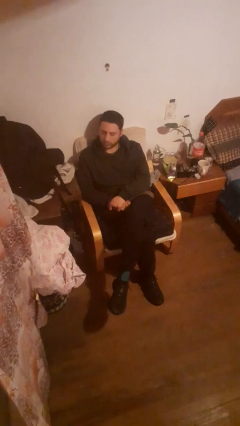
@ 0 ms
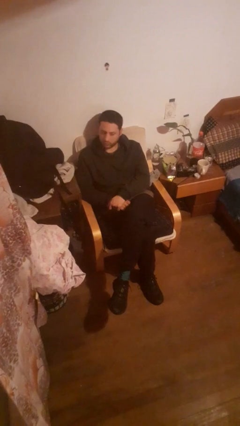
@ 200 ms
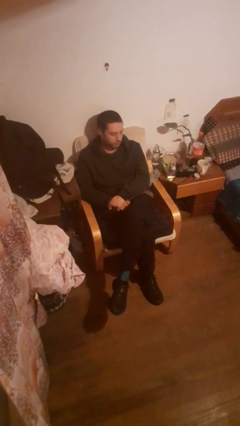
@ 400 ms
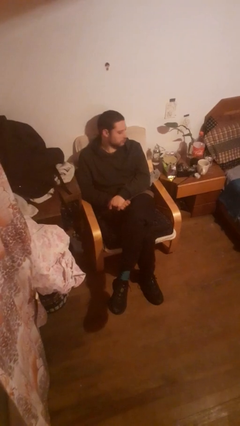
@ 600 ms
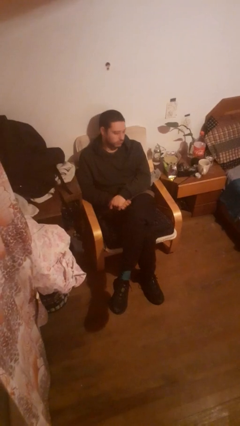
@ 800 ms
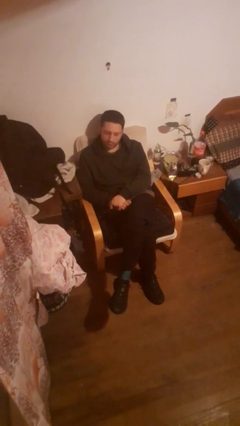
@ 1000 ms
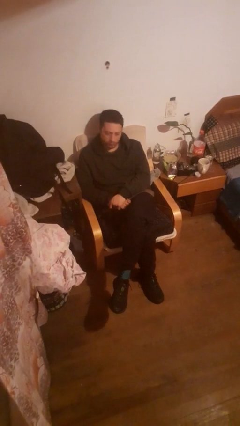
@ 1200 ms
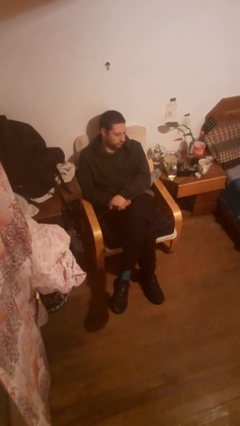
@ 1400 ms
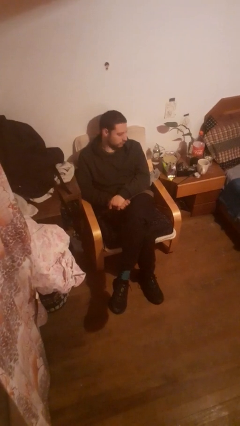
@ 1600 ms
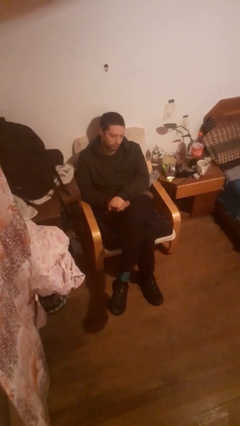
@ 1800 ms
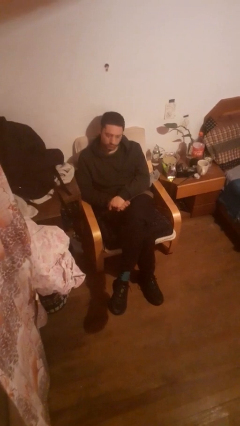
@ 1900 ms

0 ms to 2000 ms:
person shakes head

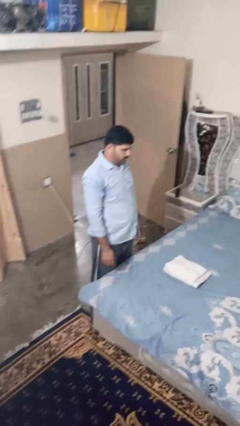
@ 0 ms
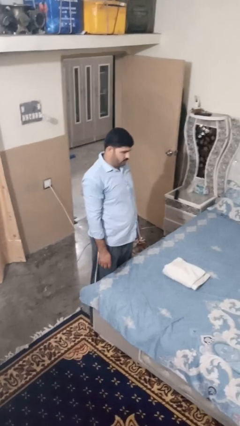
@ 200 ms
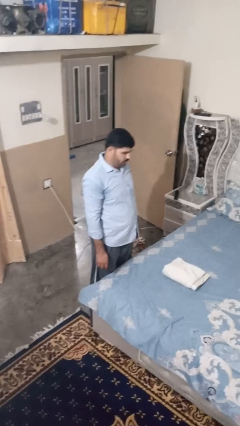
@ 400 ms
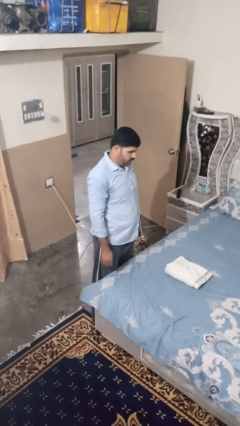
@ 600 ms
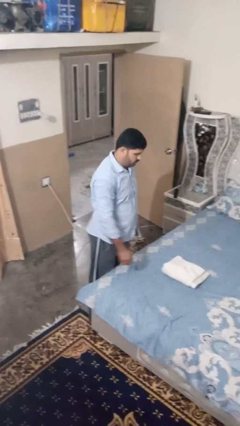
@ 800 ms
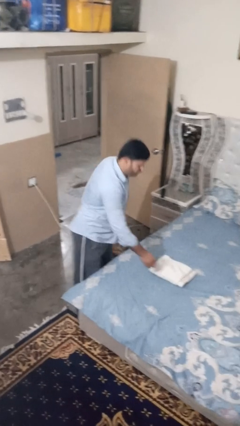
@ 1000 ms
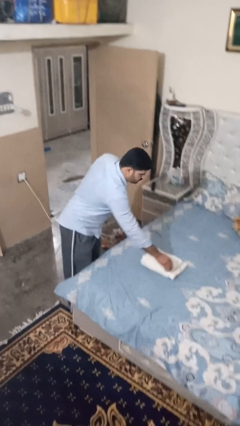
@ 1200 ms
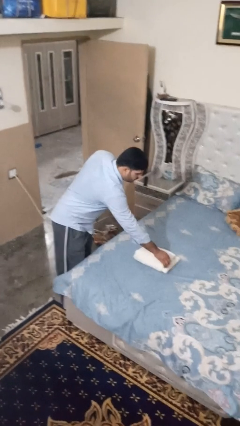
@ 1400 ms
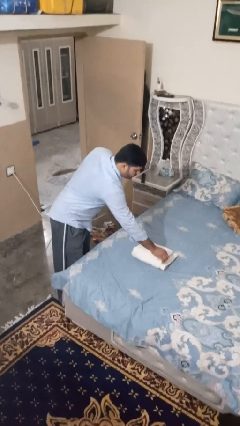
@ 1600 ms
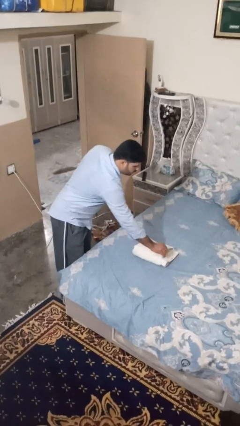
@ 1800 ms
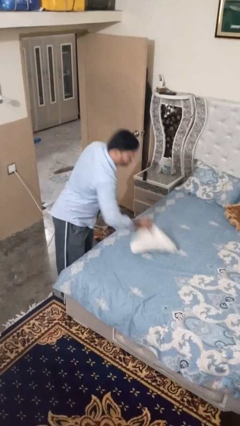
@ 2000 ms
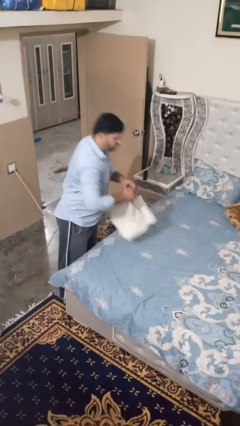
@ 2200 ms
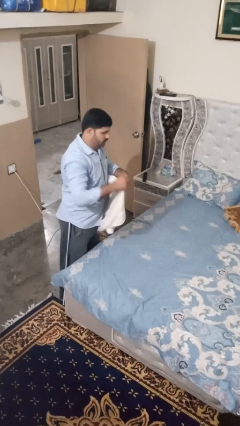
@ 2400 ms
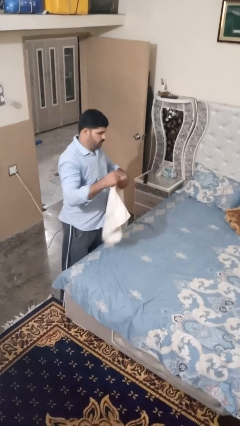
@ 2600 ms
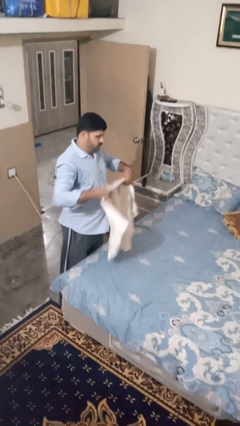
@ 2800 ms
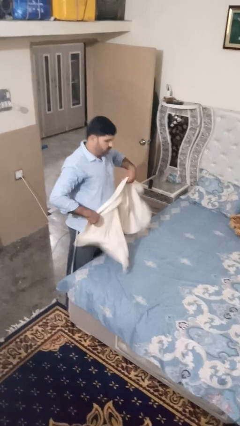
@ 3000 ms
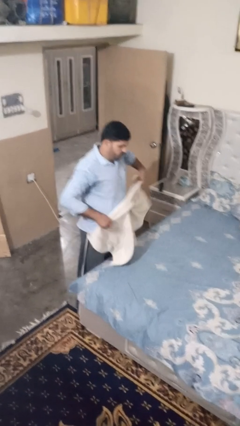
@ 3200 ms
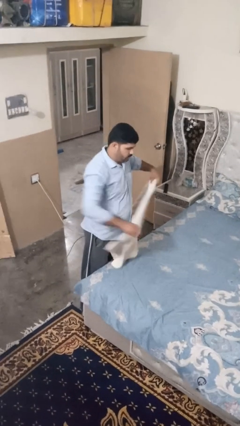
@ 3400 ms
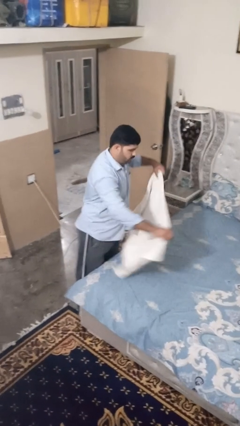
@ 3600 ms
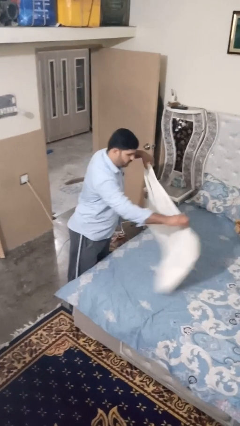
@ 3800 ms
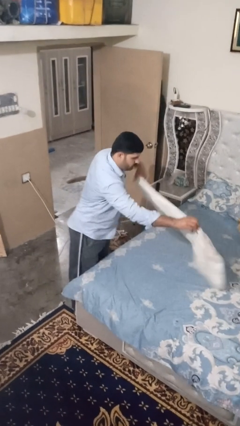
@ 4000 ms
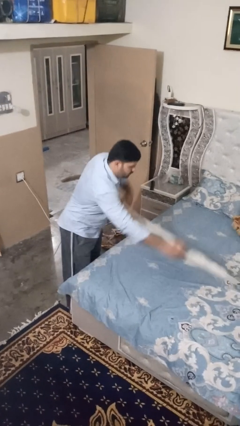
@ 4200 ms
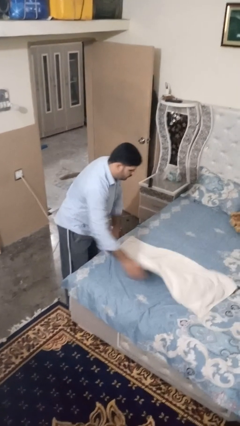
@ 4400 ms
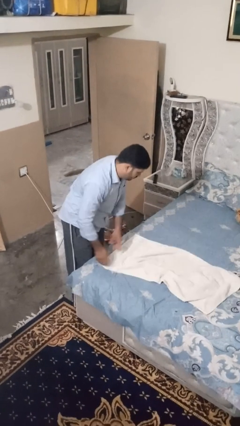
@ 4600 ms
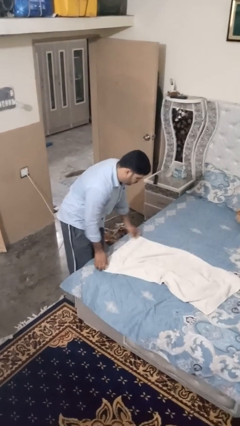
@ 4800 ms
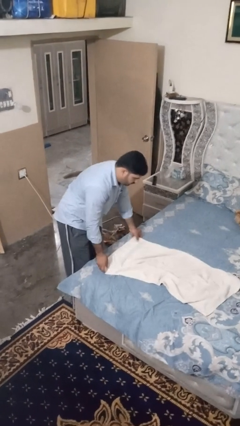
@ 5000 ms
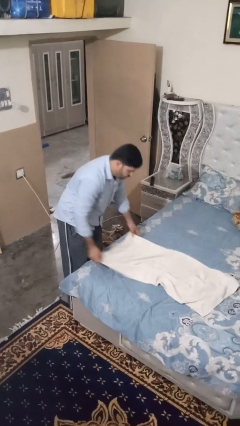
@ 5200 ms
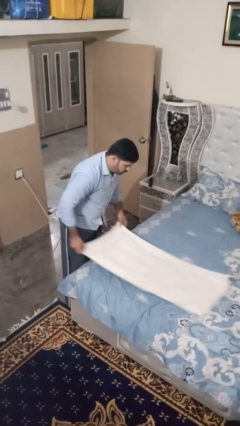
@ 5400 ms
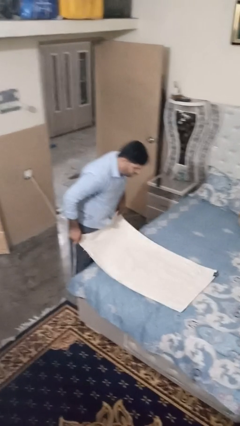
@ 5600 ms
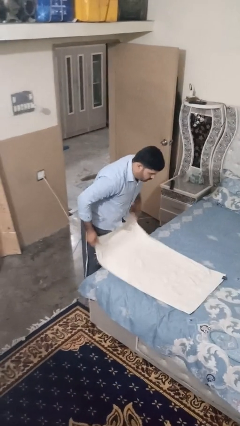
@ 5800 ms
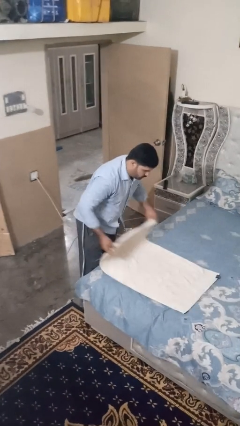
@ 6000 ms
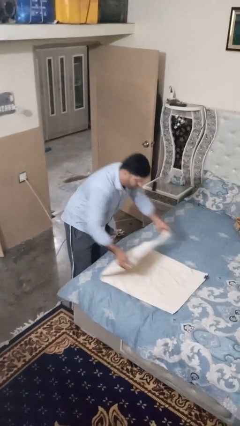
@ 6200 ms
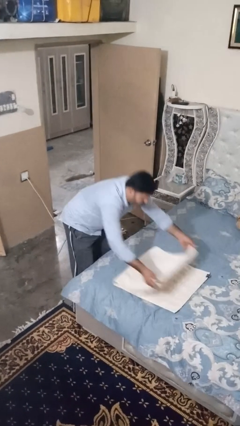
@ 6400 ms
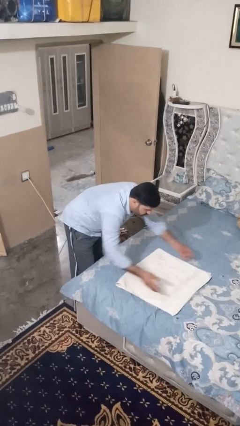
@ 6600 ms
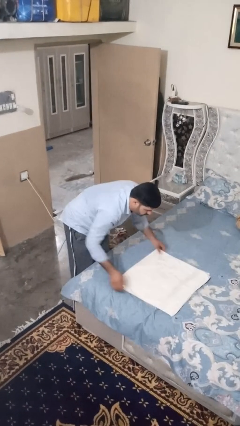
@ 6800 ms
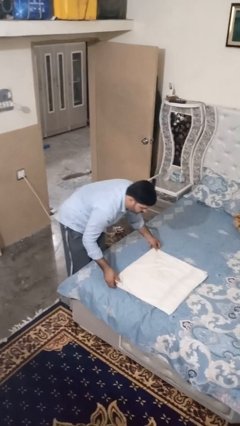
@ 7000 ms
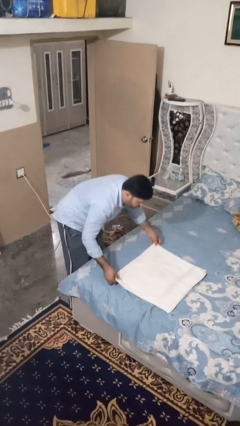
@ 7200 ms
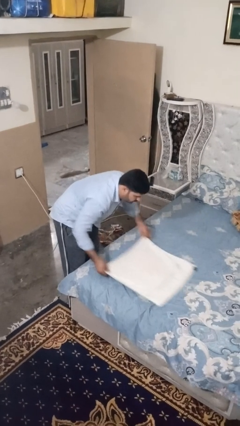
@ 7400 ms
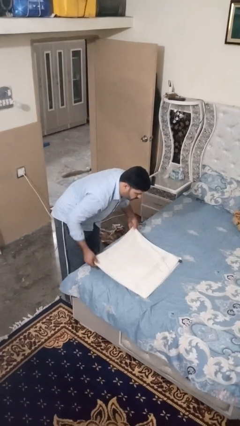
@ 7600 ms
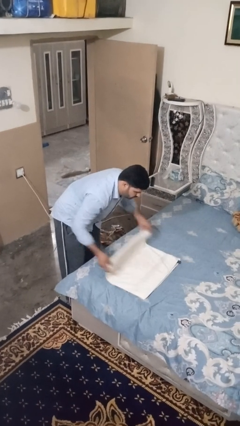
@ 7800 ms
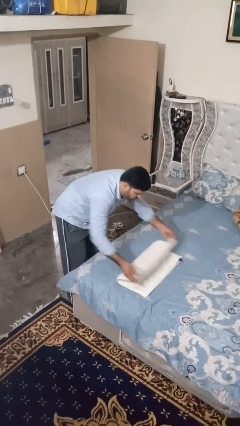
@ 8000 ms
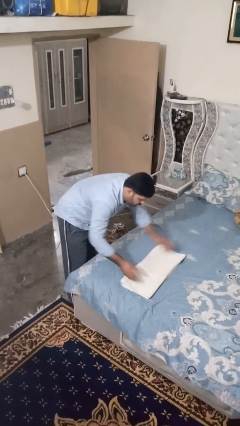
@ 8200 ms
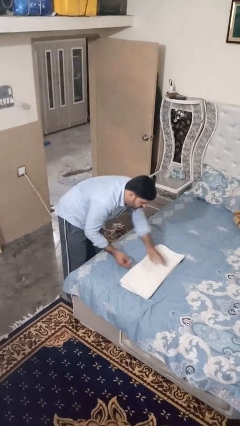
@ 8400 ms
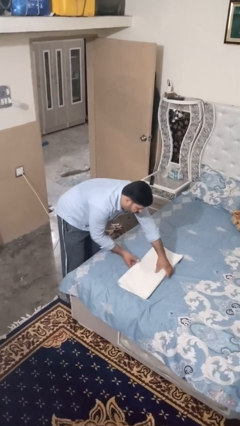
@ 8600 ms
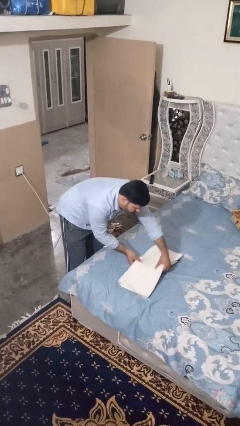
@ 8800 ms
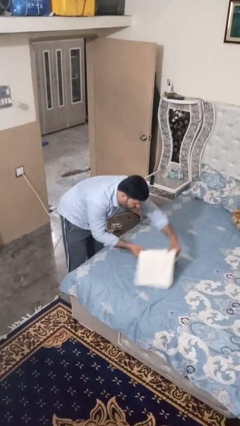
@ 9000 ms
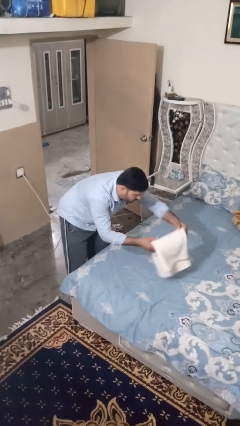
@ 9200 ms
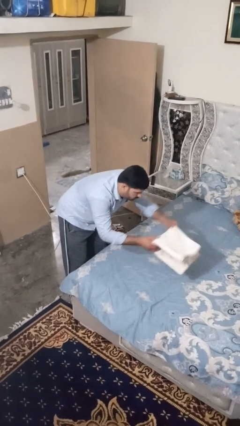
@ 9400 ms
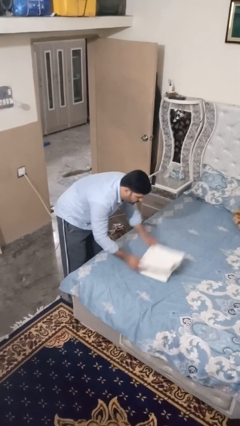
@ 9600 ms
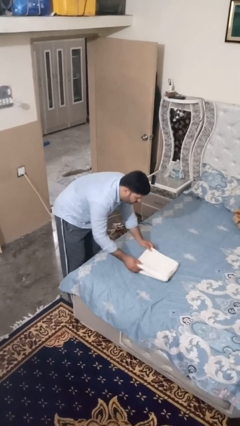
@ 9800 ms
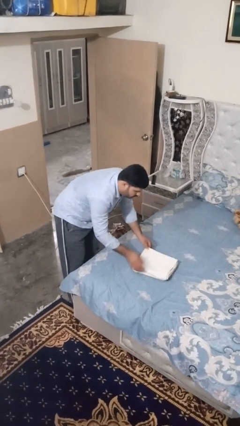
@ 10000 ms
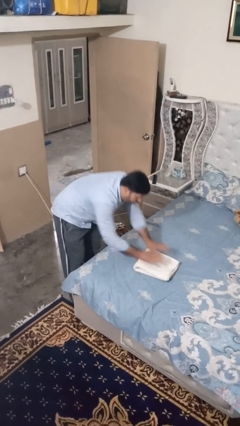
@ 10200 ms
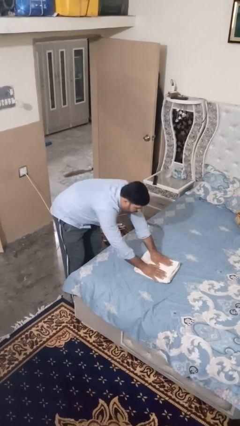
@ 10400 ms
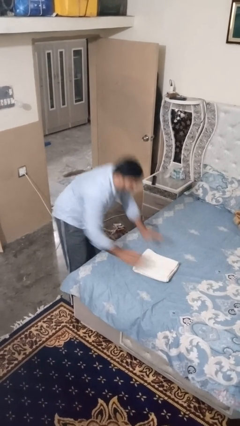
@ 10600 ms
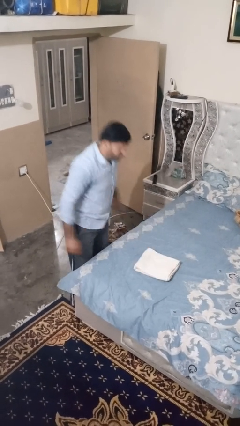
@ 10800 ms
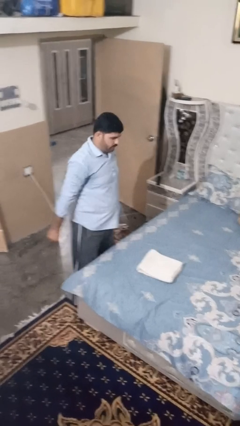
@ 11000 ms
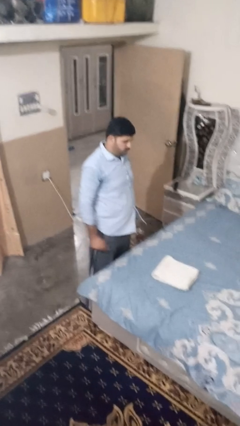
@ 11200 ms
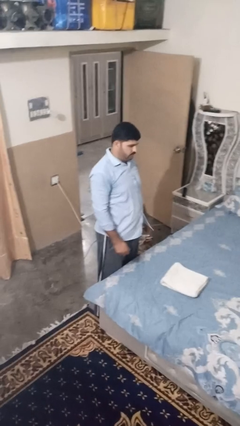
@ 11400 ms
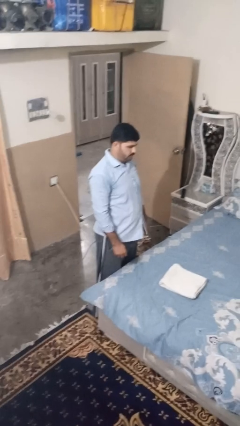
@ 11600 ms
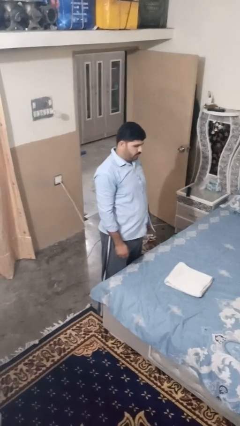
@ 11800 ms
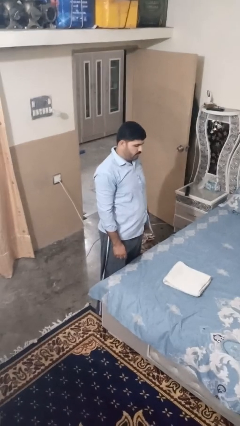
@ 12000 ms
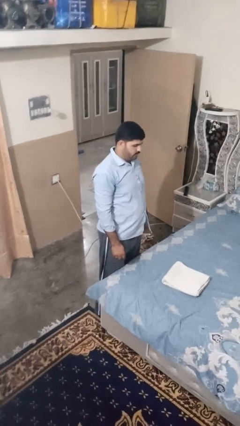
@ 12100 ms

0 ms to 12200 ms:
person folds towel

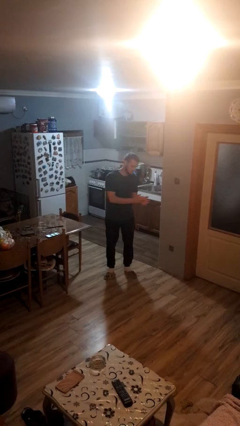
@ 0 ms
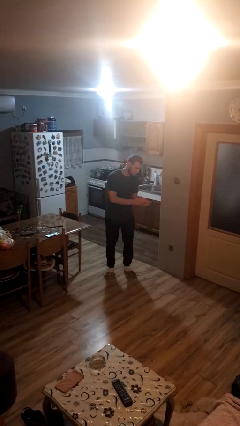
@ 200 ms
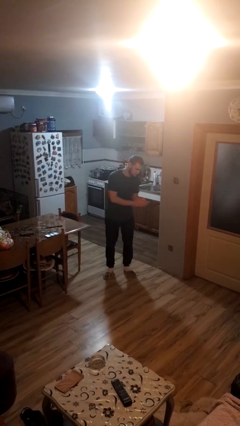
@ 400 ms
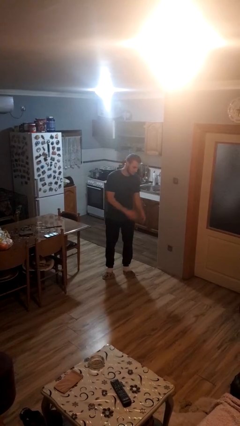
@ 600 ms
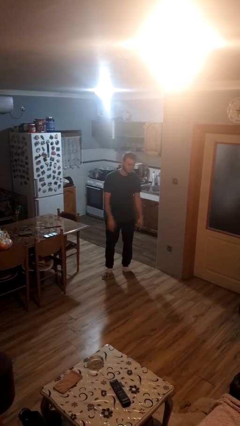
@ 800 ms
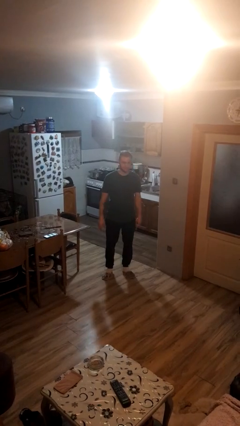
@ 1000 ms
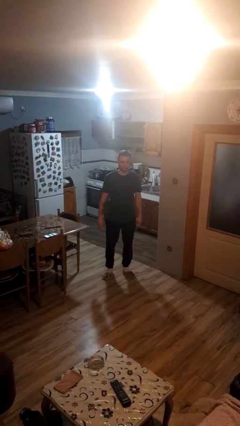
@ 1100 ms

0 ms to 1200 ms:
person claps hands

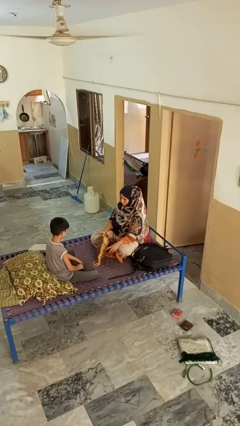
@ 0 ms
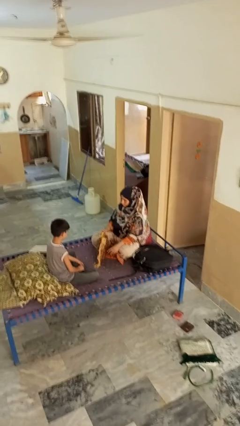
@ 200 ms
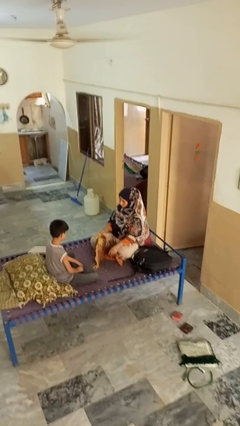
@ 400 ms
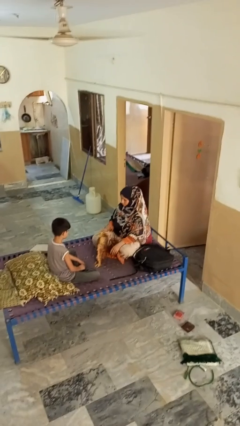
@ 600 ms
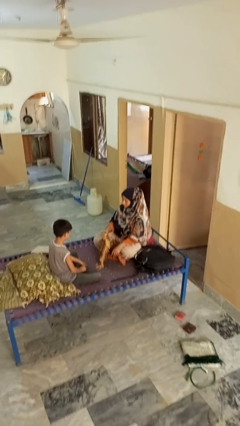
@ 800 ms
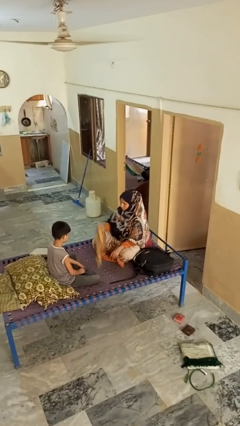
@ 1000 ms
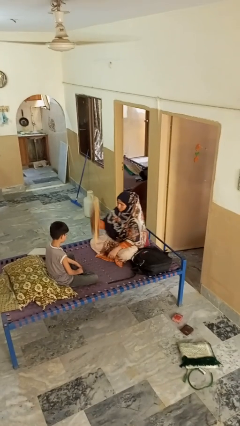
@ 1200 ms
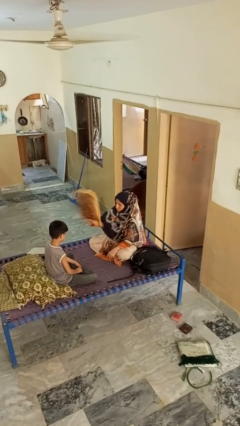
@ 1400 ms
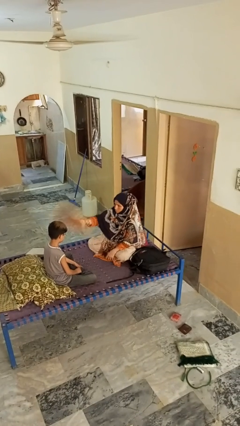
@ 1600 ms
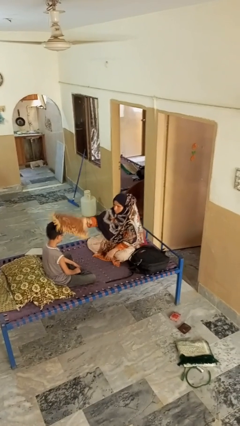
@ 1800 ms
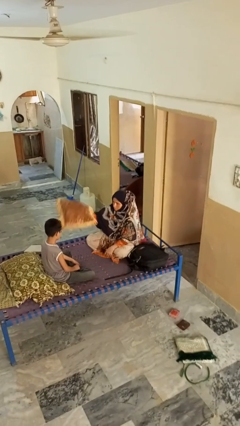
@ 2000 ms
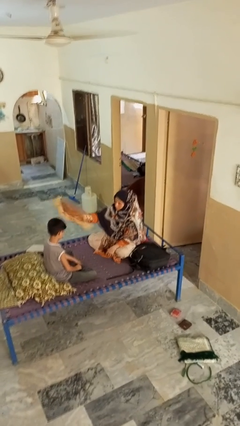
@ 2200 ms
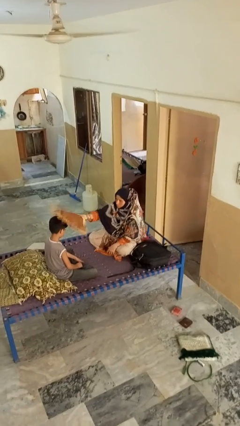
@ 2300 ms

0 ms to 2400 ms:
person hits person with pillow
